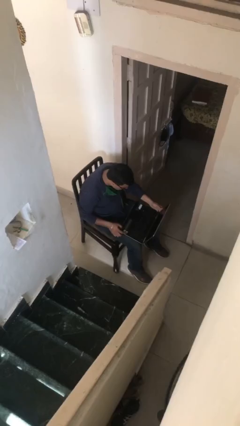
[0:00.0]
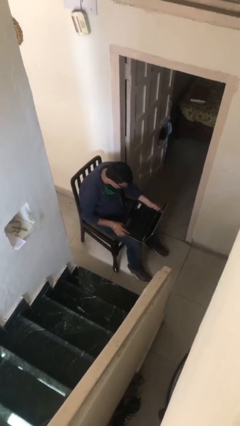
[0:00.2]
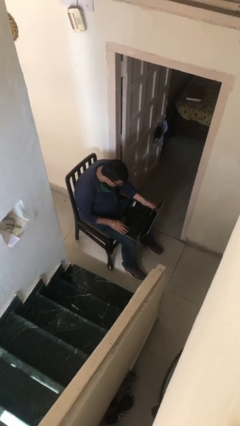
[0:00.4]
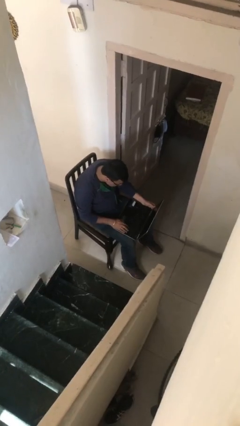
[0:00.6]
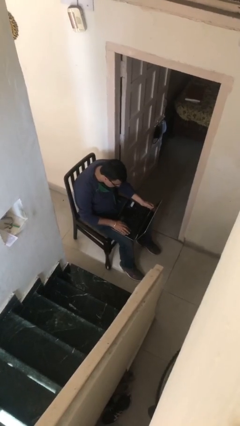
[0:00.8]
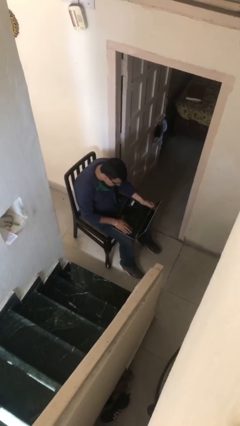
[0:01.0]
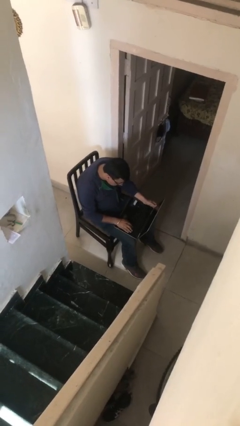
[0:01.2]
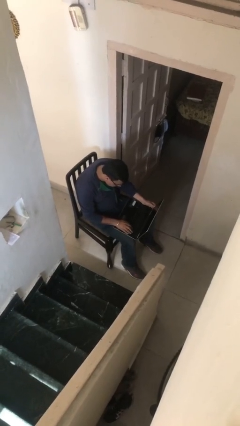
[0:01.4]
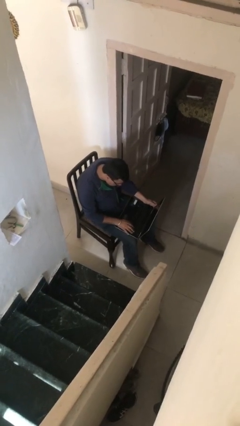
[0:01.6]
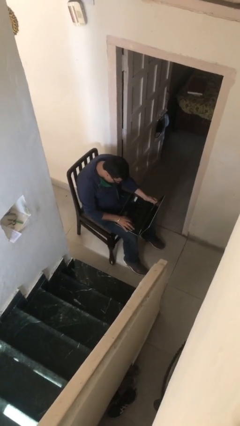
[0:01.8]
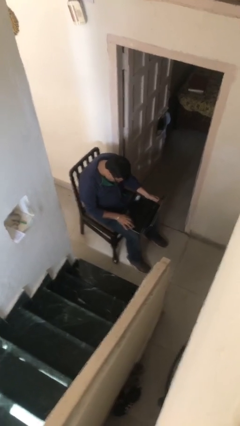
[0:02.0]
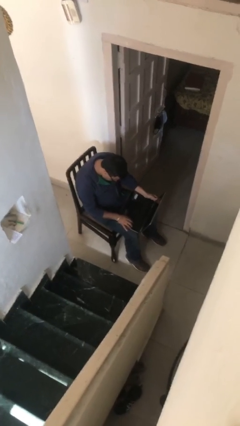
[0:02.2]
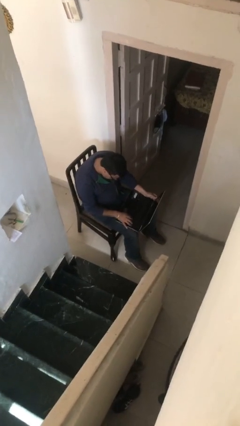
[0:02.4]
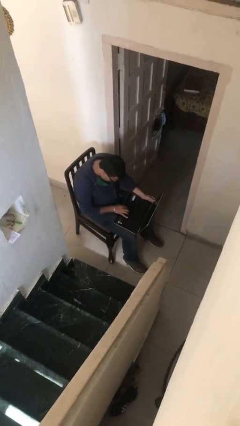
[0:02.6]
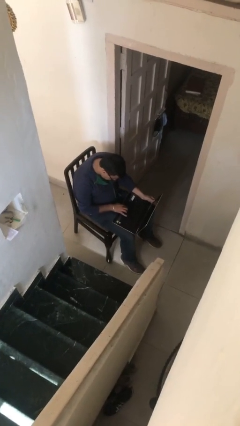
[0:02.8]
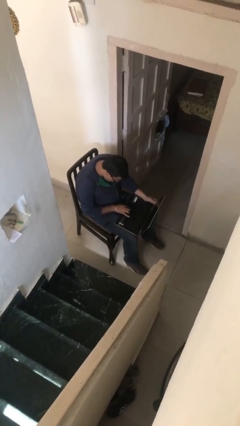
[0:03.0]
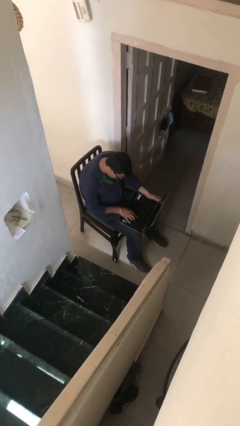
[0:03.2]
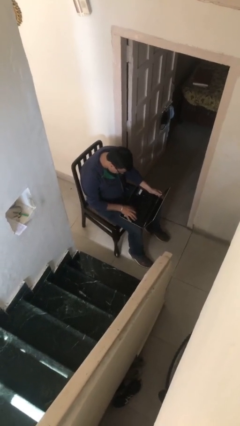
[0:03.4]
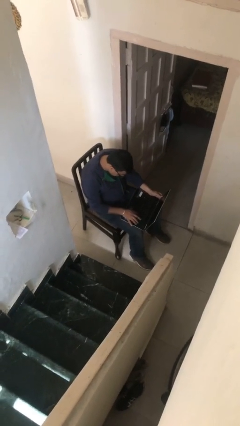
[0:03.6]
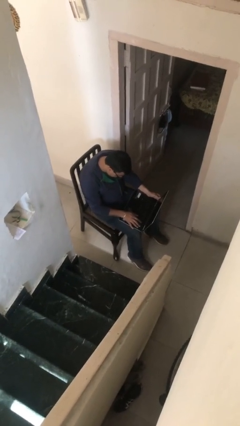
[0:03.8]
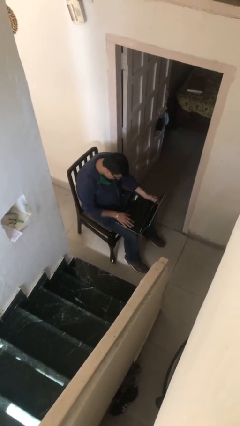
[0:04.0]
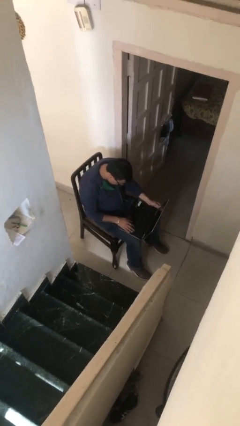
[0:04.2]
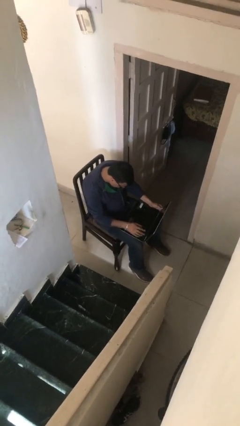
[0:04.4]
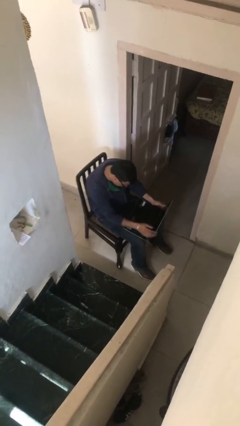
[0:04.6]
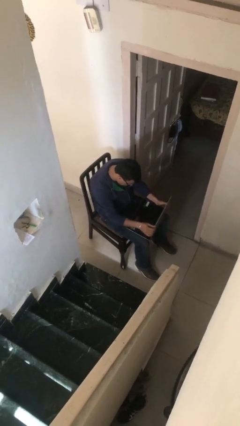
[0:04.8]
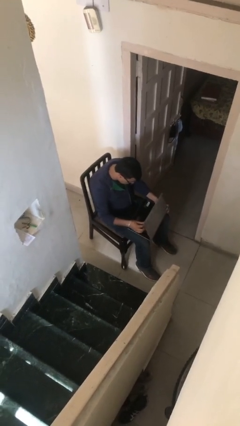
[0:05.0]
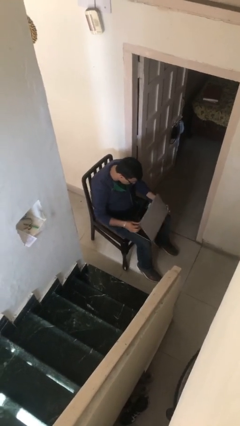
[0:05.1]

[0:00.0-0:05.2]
person interacts with laptop

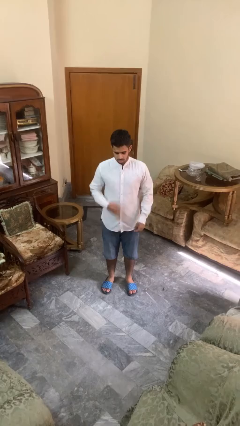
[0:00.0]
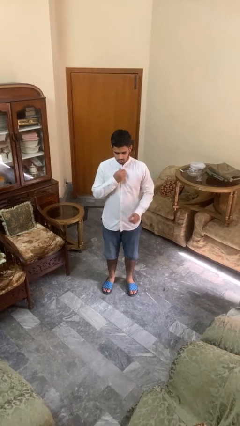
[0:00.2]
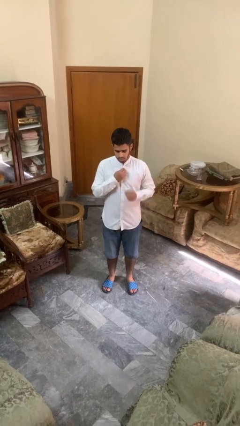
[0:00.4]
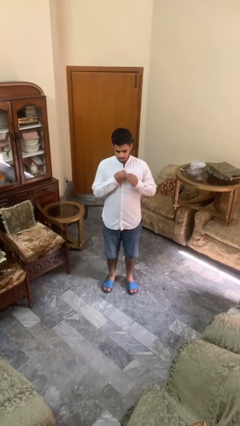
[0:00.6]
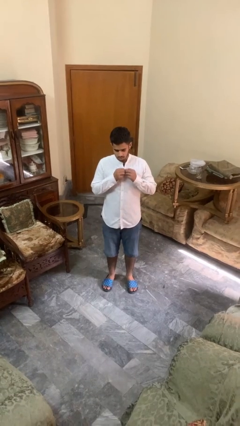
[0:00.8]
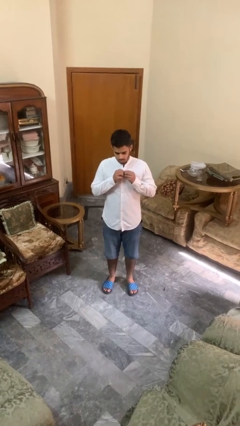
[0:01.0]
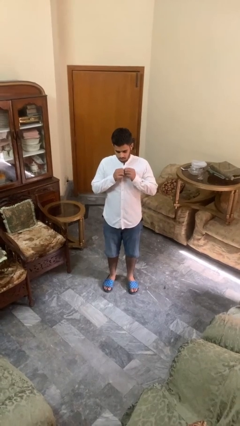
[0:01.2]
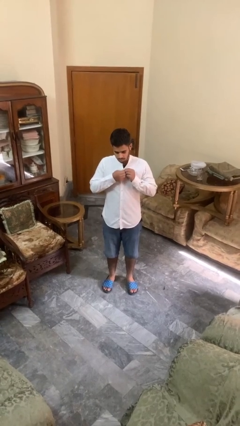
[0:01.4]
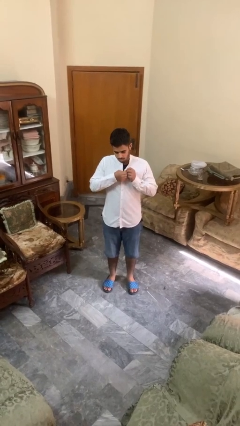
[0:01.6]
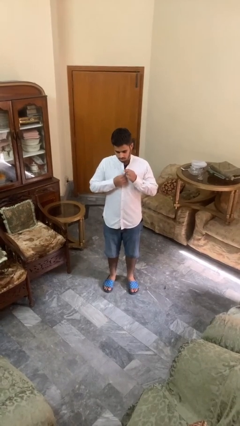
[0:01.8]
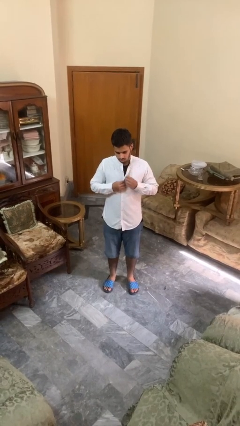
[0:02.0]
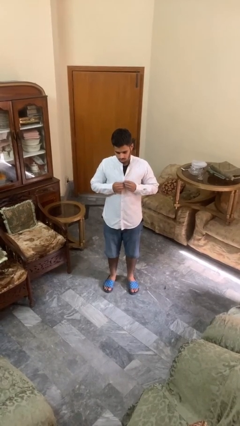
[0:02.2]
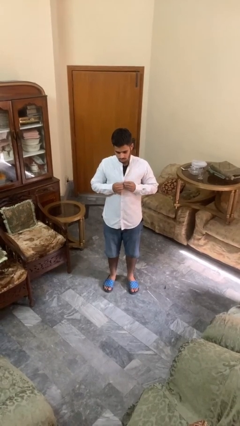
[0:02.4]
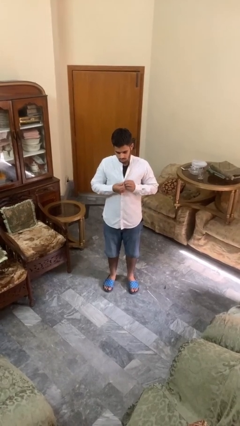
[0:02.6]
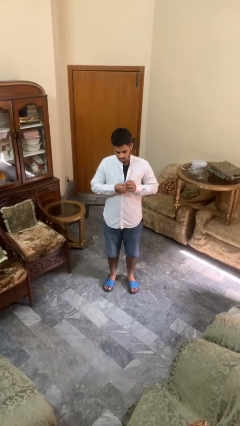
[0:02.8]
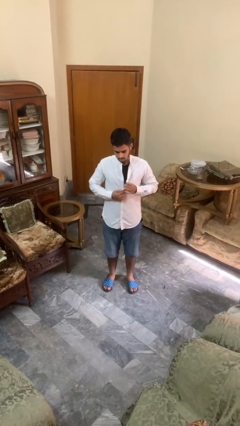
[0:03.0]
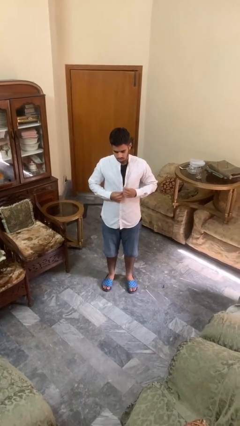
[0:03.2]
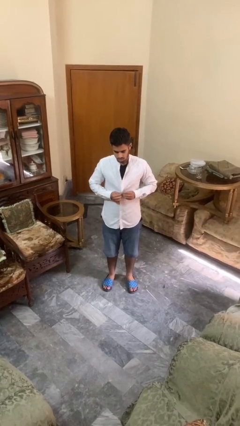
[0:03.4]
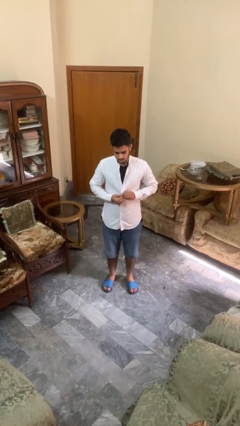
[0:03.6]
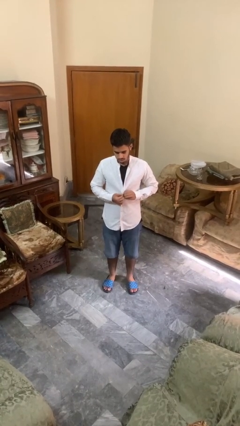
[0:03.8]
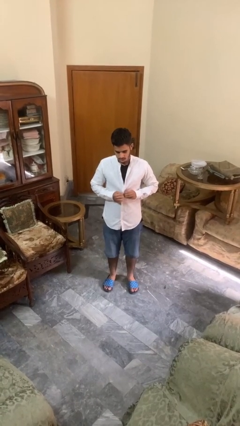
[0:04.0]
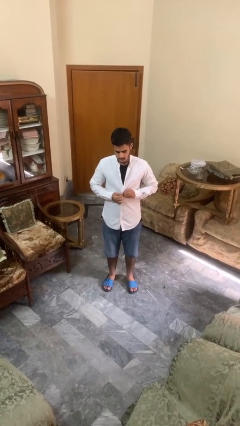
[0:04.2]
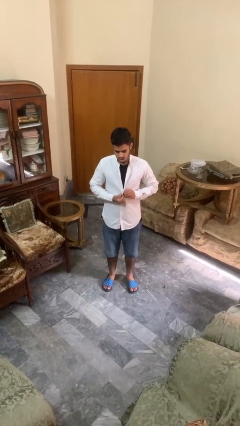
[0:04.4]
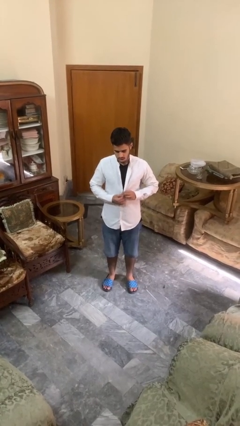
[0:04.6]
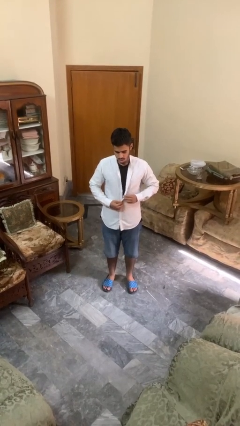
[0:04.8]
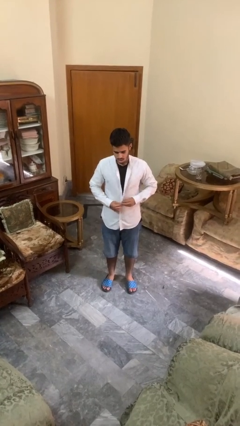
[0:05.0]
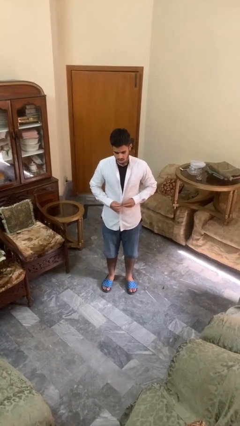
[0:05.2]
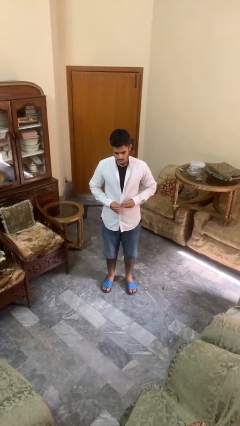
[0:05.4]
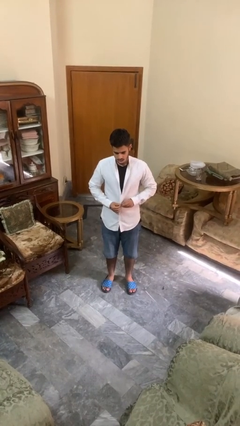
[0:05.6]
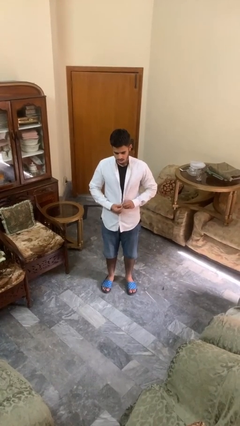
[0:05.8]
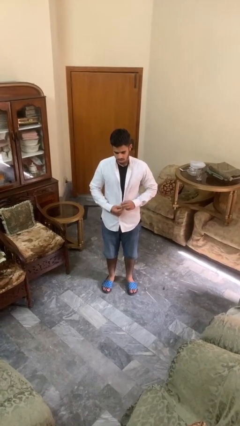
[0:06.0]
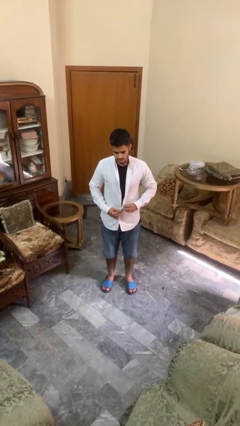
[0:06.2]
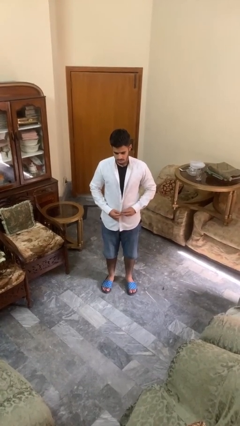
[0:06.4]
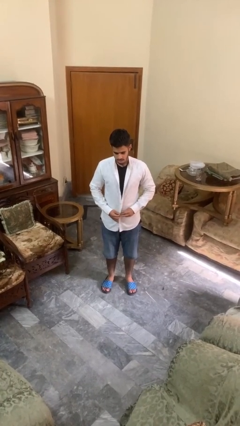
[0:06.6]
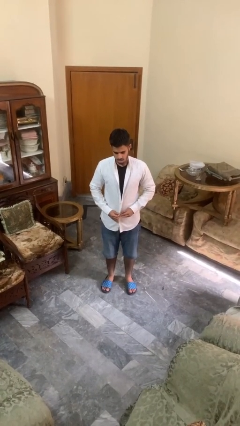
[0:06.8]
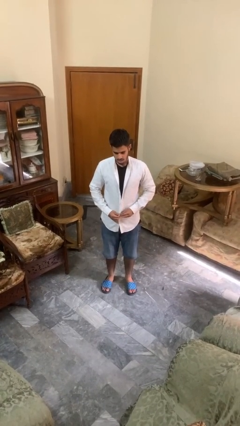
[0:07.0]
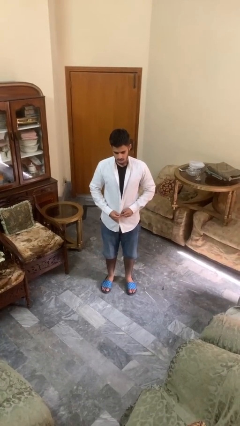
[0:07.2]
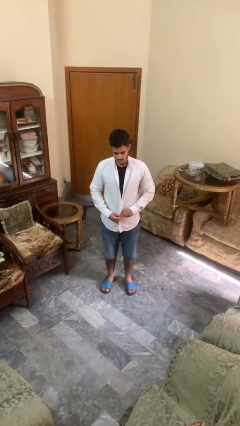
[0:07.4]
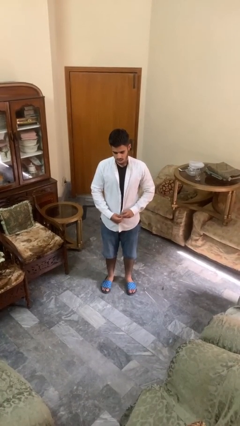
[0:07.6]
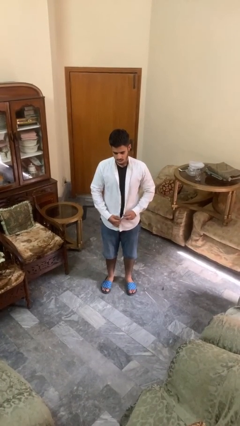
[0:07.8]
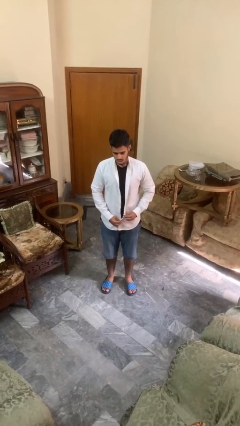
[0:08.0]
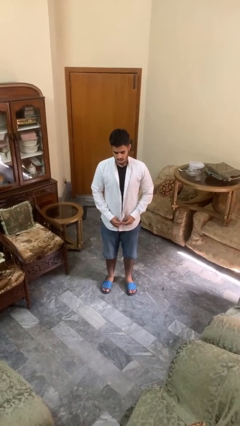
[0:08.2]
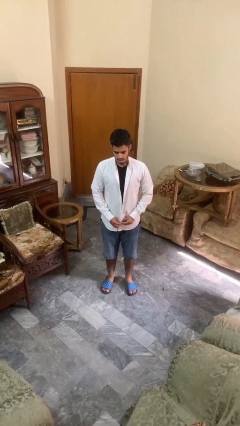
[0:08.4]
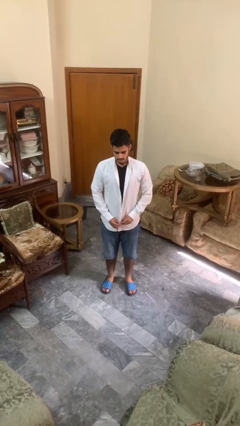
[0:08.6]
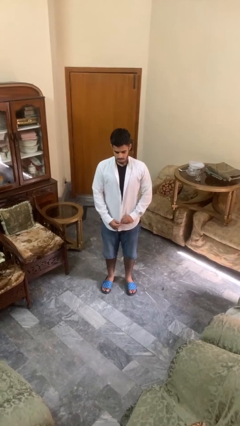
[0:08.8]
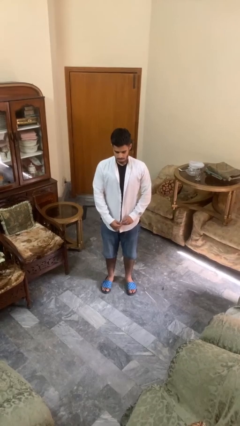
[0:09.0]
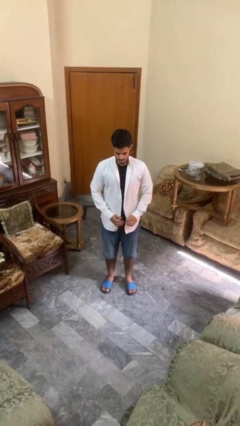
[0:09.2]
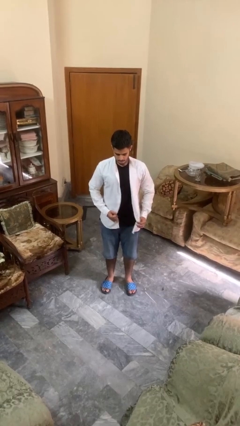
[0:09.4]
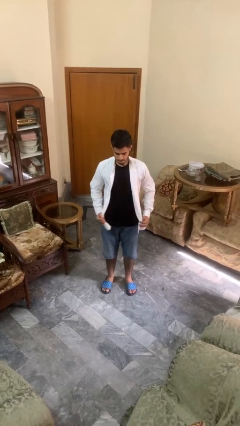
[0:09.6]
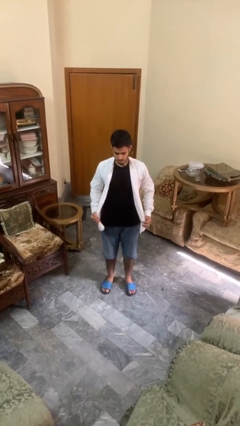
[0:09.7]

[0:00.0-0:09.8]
person unbuttons shirt

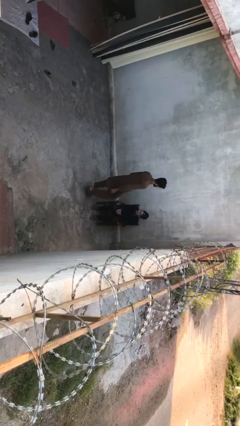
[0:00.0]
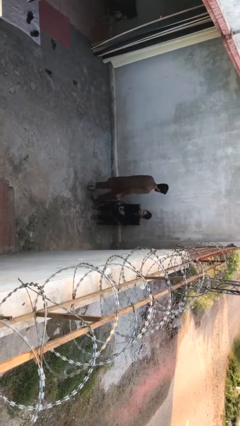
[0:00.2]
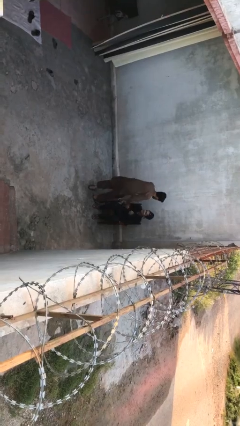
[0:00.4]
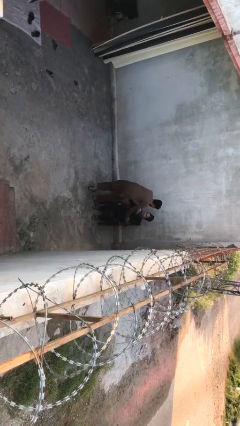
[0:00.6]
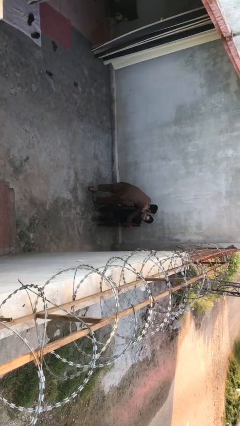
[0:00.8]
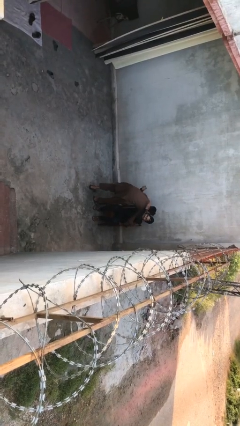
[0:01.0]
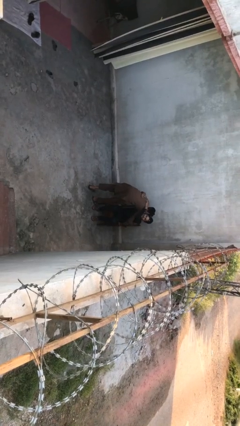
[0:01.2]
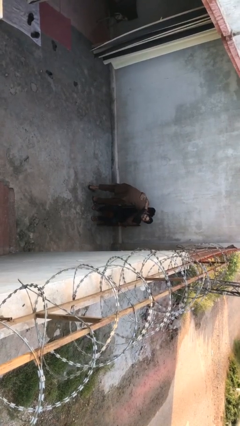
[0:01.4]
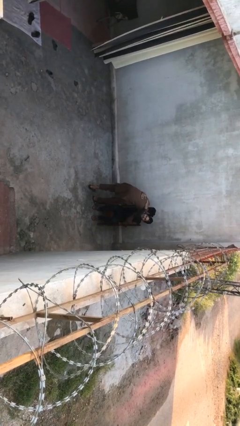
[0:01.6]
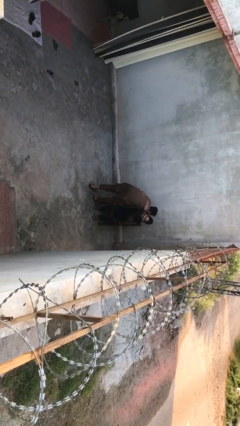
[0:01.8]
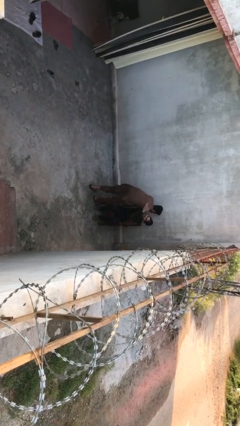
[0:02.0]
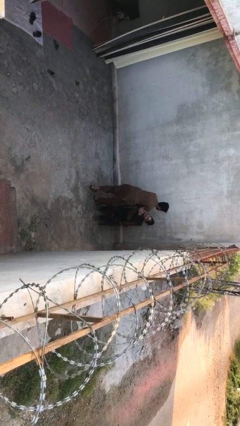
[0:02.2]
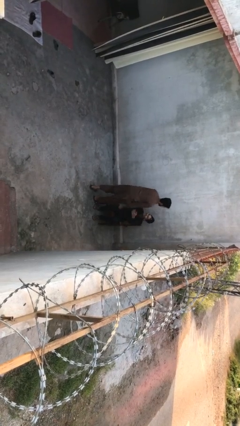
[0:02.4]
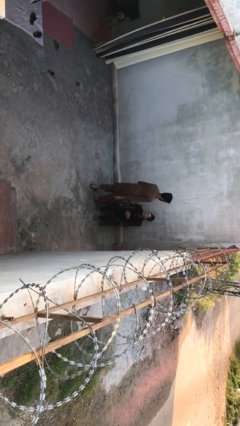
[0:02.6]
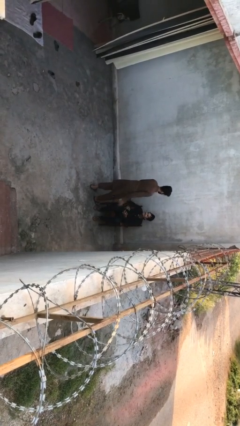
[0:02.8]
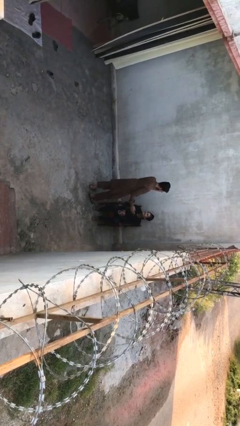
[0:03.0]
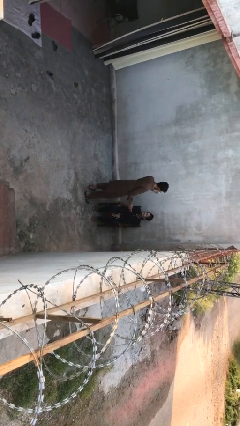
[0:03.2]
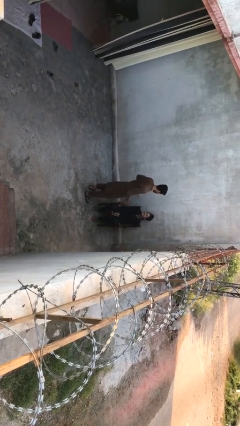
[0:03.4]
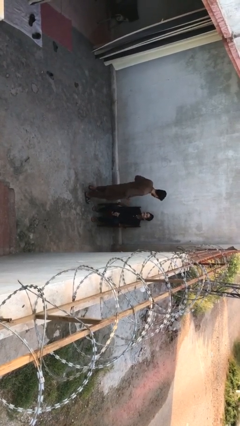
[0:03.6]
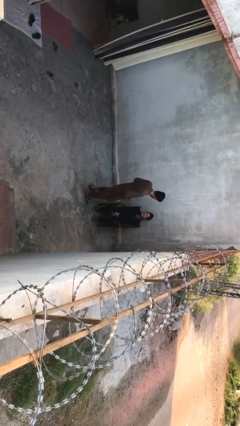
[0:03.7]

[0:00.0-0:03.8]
person embraces person
